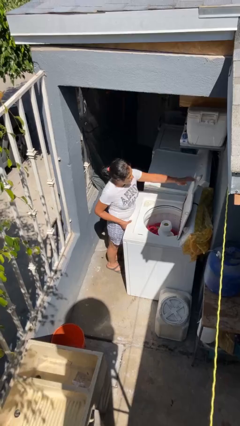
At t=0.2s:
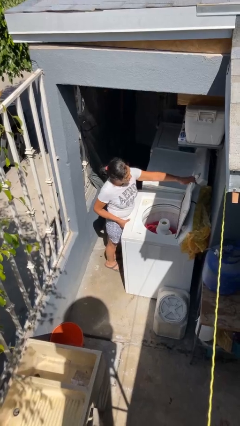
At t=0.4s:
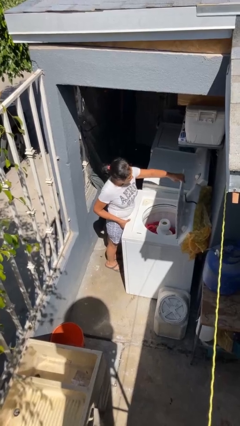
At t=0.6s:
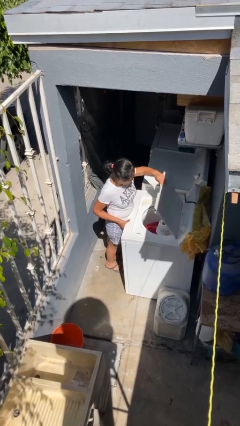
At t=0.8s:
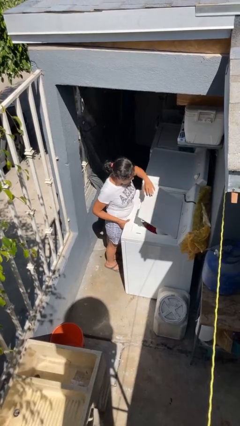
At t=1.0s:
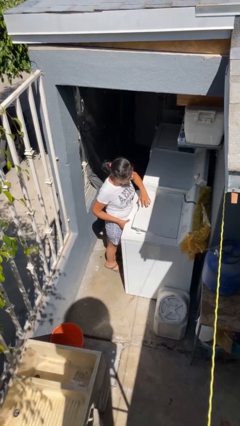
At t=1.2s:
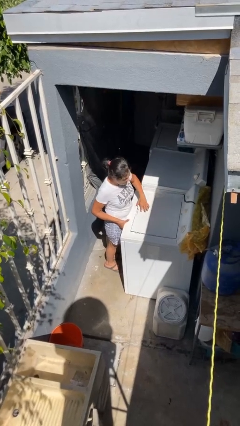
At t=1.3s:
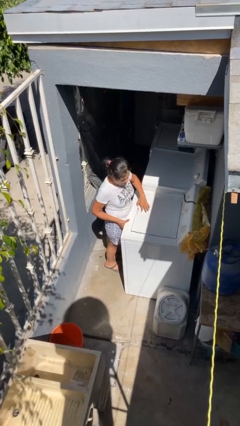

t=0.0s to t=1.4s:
person closes clothes washer

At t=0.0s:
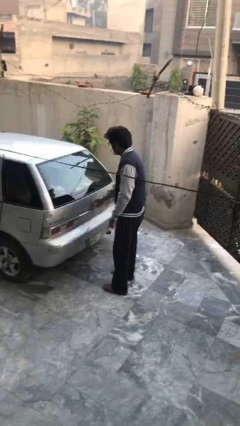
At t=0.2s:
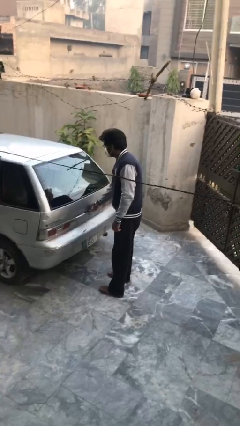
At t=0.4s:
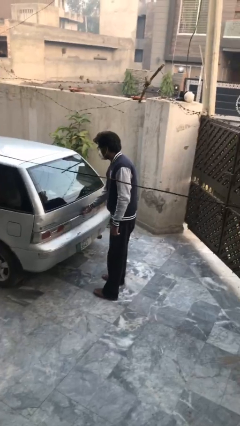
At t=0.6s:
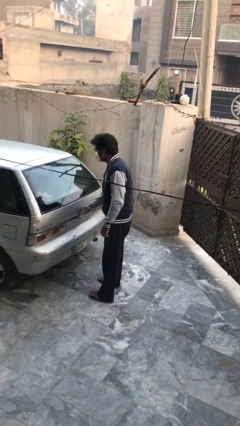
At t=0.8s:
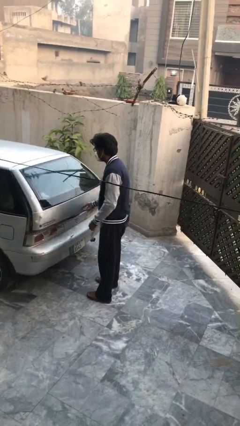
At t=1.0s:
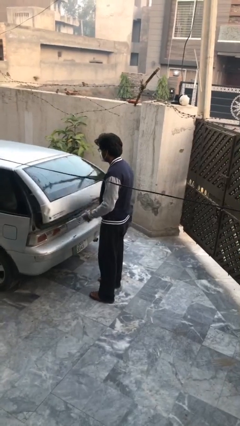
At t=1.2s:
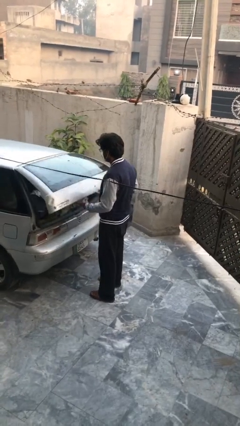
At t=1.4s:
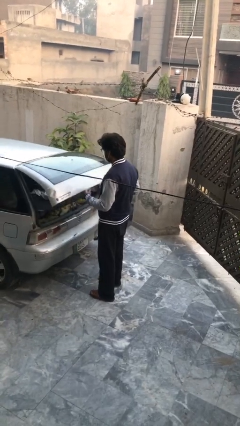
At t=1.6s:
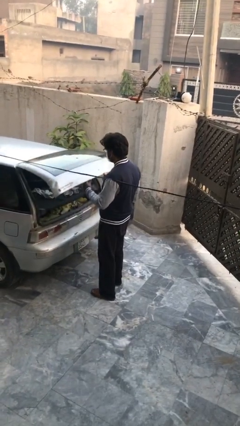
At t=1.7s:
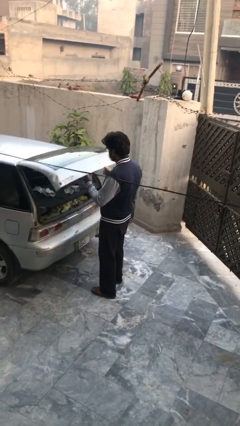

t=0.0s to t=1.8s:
person opens car trunk

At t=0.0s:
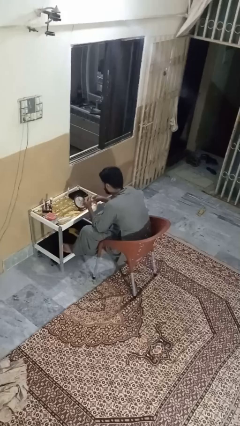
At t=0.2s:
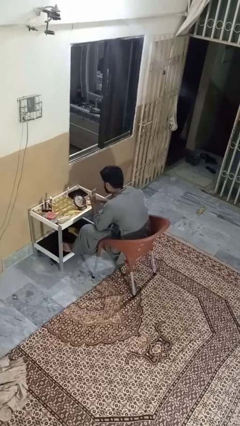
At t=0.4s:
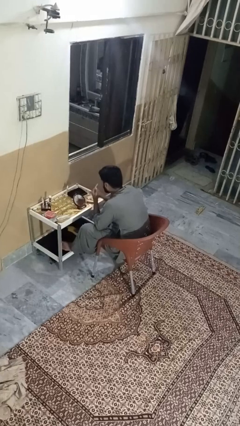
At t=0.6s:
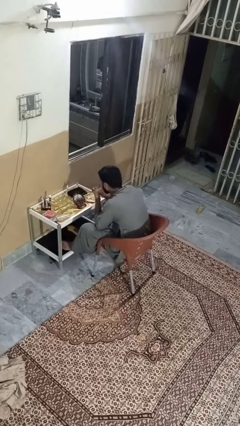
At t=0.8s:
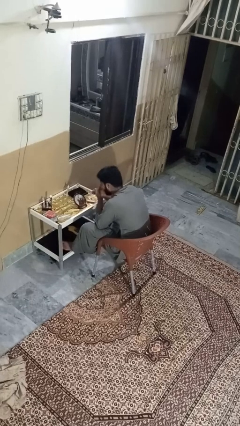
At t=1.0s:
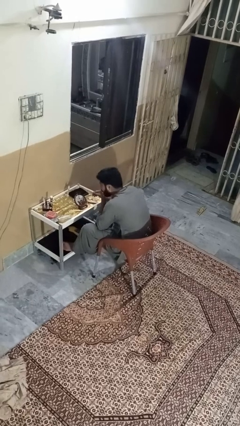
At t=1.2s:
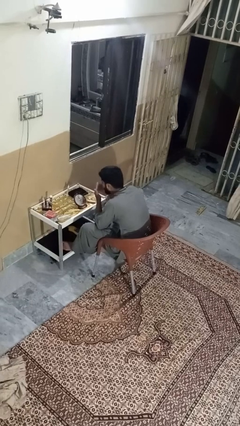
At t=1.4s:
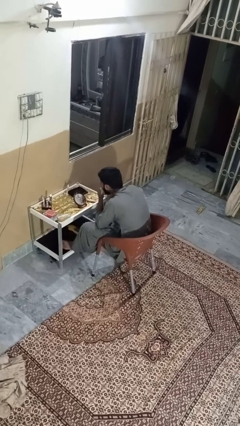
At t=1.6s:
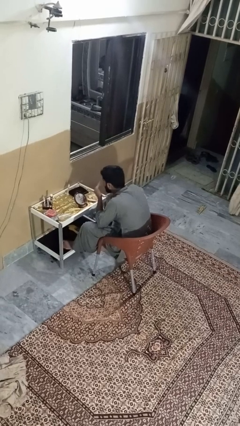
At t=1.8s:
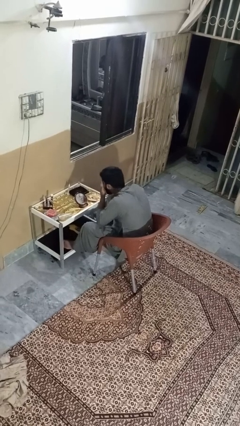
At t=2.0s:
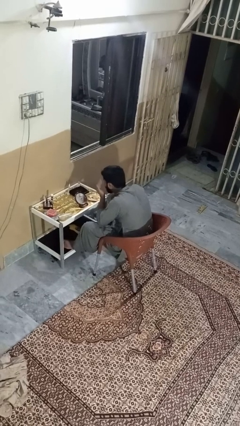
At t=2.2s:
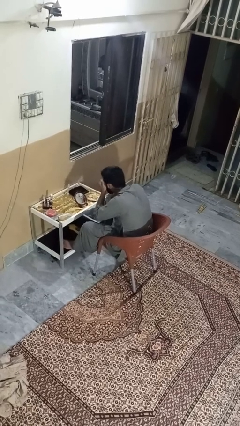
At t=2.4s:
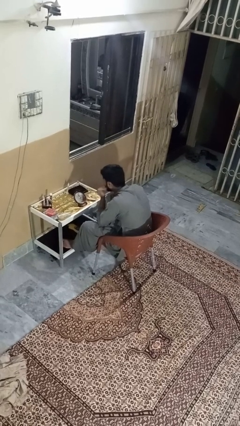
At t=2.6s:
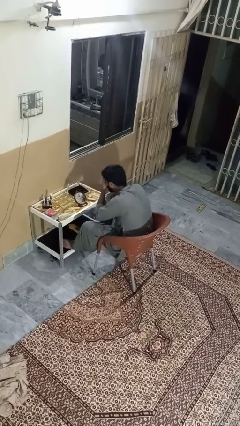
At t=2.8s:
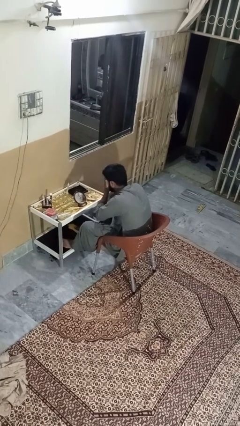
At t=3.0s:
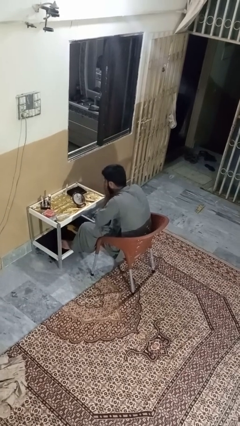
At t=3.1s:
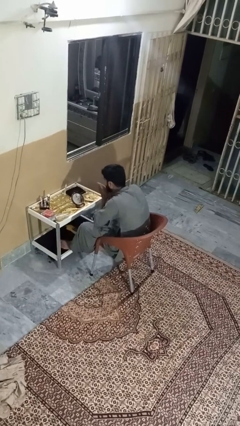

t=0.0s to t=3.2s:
person applies foundation makeup

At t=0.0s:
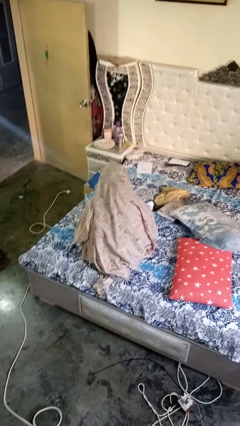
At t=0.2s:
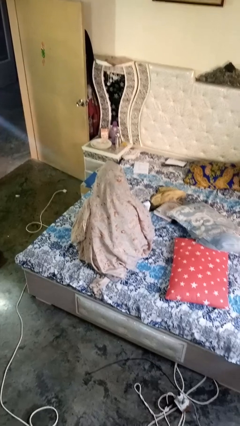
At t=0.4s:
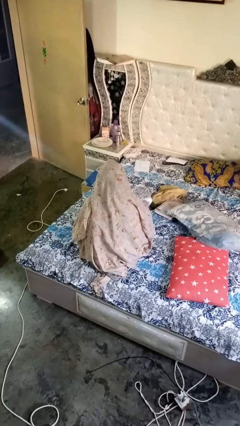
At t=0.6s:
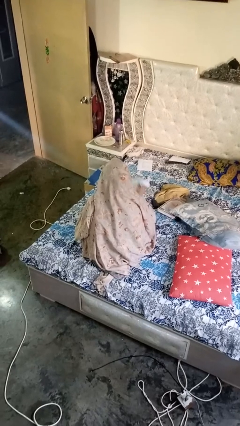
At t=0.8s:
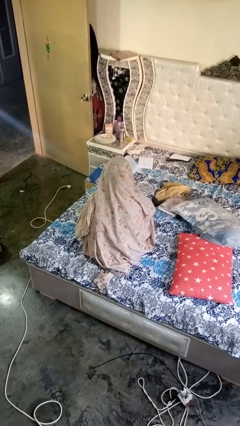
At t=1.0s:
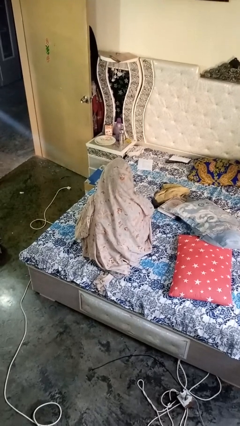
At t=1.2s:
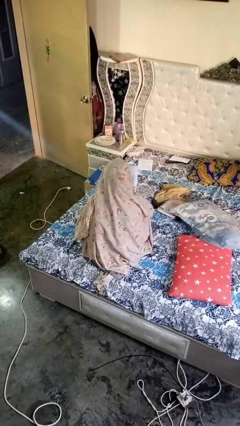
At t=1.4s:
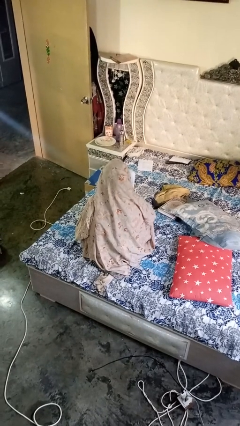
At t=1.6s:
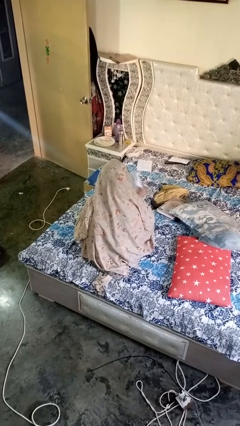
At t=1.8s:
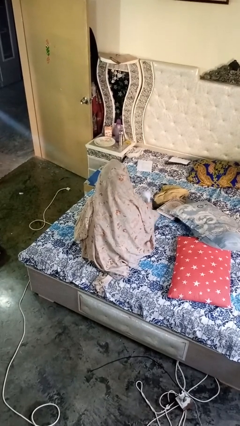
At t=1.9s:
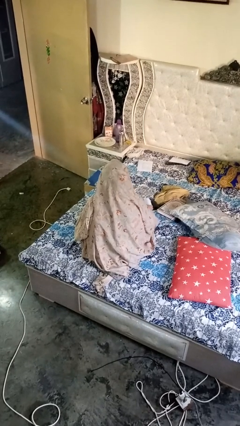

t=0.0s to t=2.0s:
person wipes mouth with napkin

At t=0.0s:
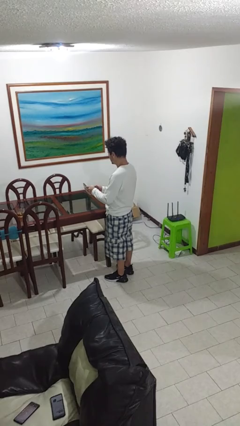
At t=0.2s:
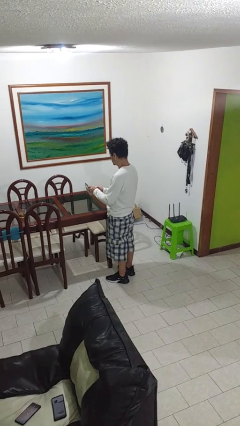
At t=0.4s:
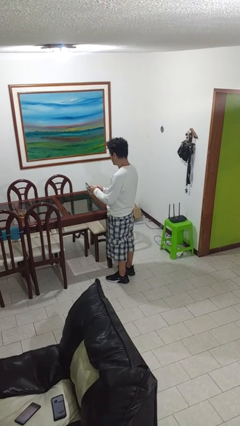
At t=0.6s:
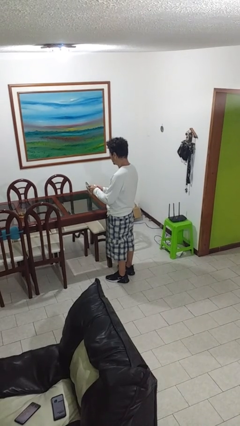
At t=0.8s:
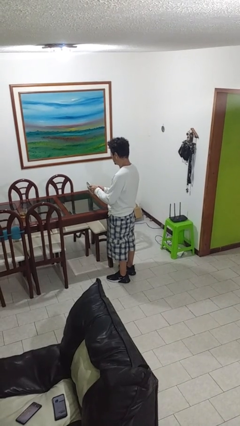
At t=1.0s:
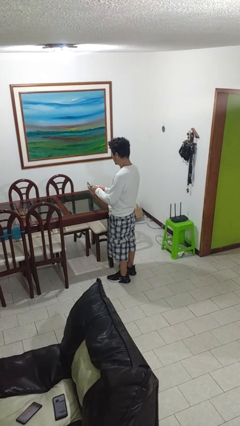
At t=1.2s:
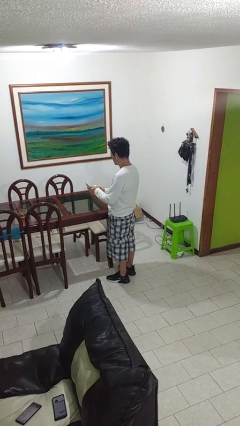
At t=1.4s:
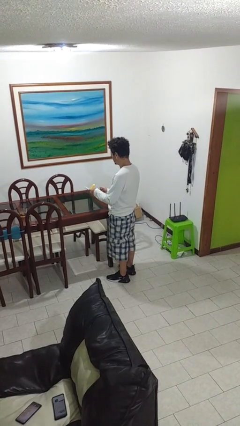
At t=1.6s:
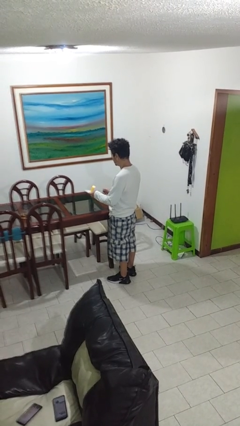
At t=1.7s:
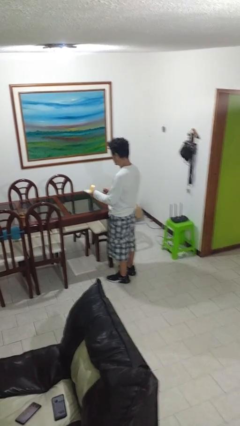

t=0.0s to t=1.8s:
person lights candle

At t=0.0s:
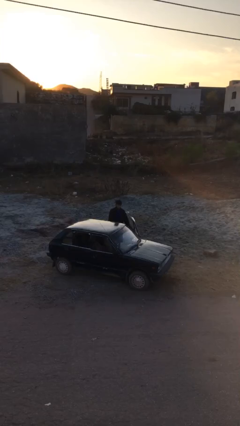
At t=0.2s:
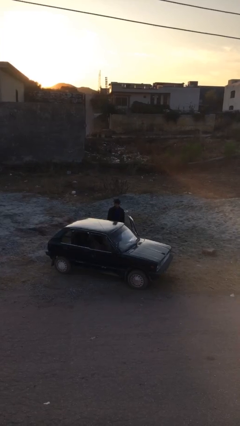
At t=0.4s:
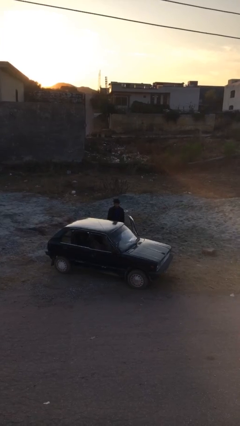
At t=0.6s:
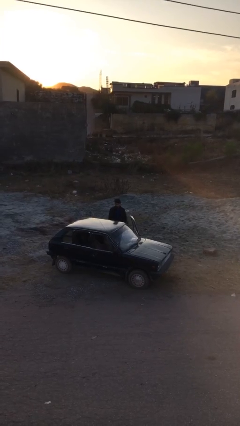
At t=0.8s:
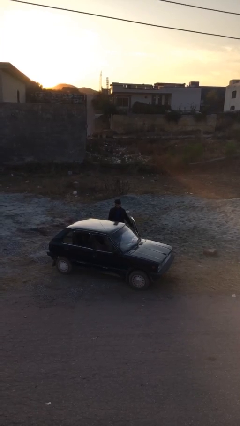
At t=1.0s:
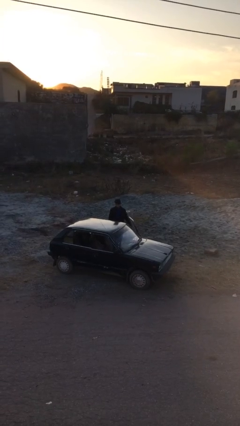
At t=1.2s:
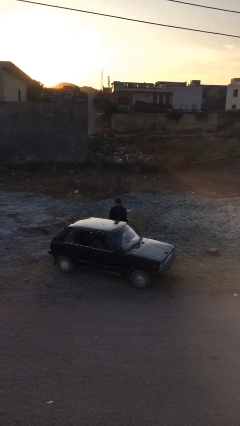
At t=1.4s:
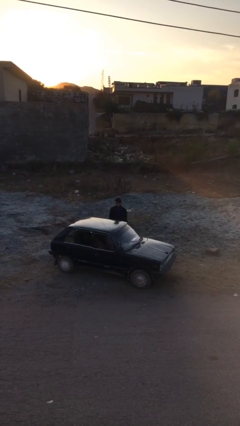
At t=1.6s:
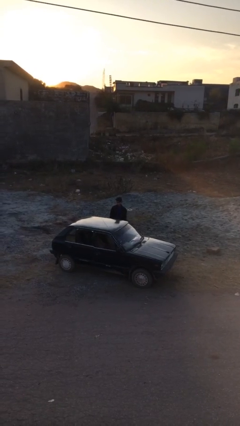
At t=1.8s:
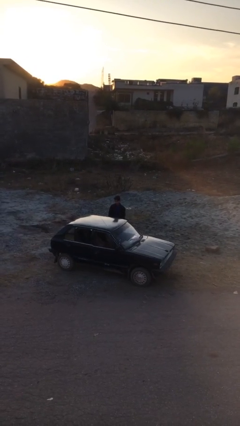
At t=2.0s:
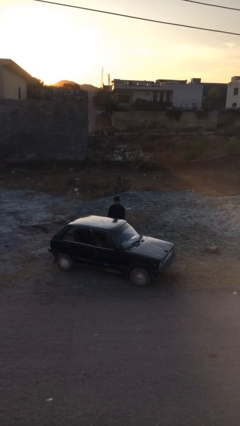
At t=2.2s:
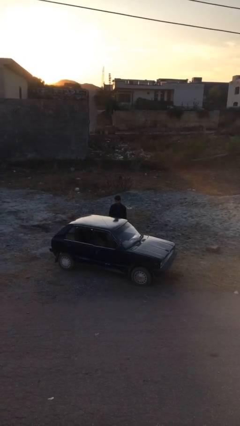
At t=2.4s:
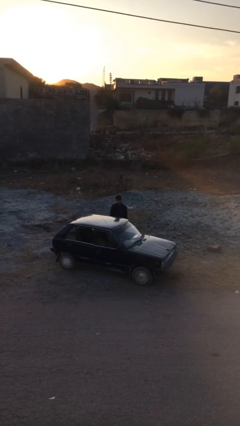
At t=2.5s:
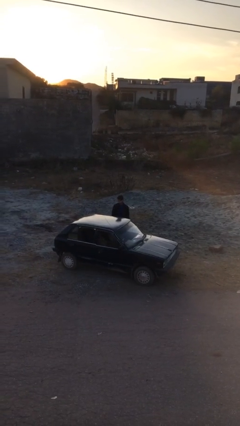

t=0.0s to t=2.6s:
person closes car door

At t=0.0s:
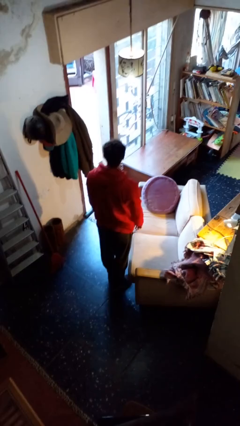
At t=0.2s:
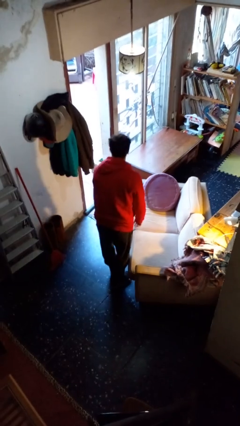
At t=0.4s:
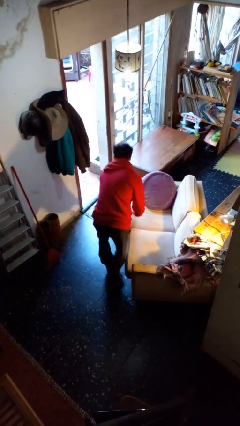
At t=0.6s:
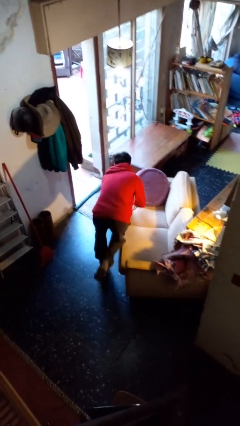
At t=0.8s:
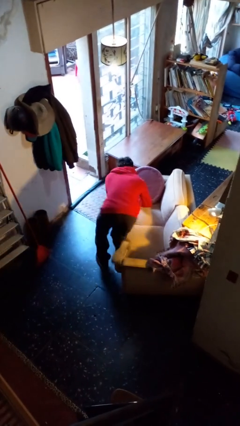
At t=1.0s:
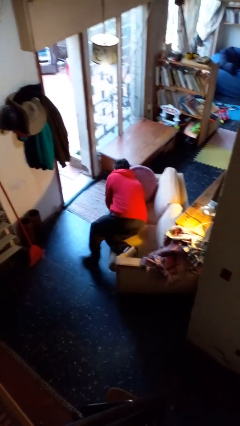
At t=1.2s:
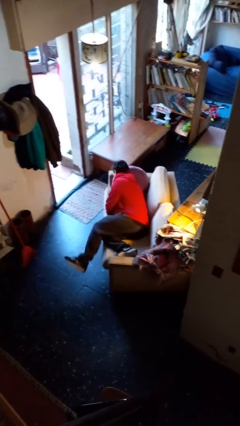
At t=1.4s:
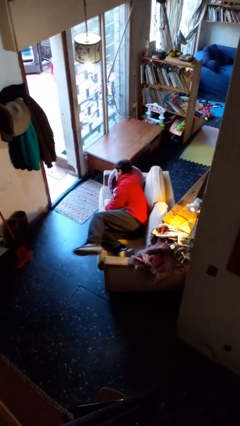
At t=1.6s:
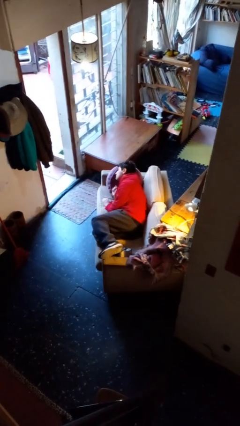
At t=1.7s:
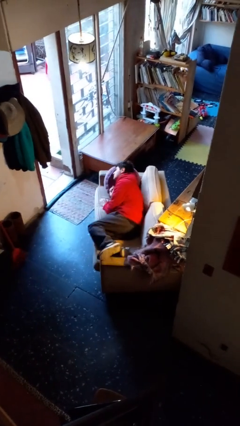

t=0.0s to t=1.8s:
person lies down on couch

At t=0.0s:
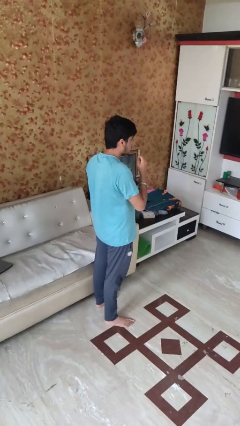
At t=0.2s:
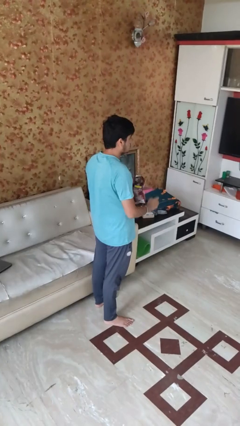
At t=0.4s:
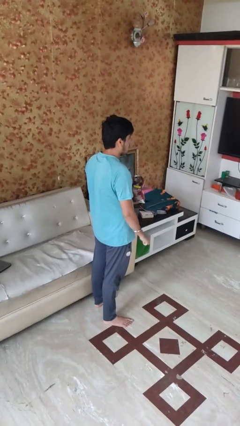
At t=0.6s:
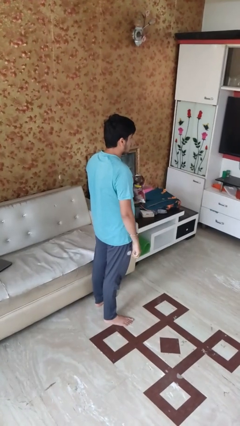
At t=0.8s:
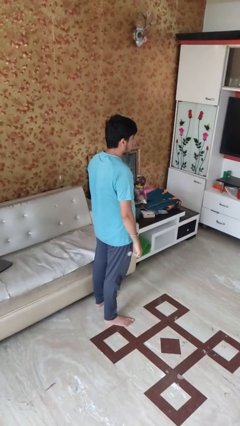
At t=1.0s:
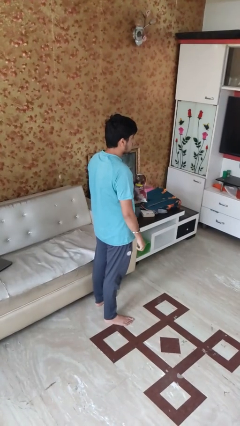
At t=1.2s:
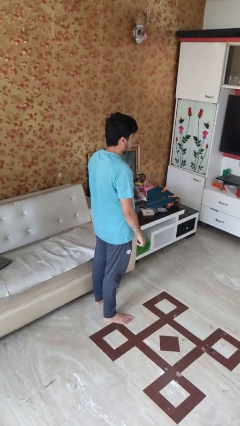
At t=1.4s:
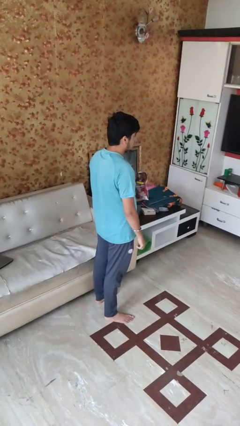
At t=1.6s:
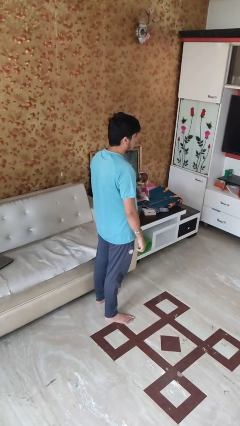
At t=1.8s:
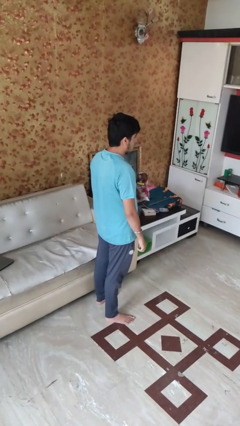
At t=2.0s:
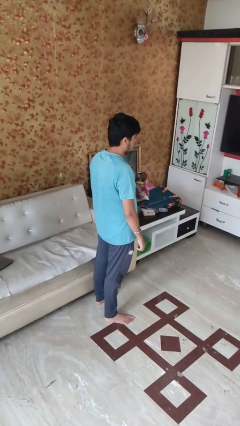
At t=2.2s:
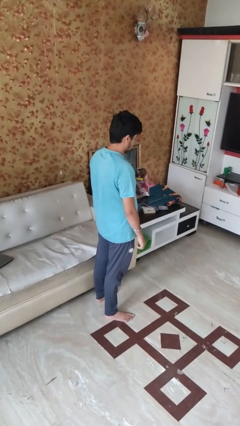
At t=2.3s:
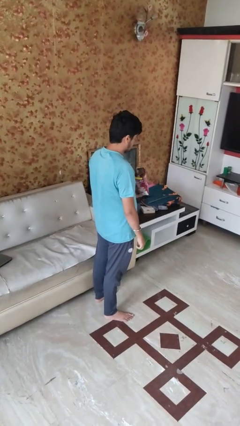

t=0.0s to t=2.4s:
person eats snack from bag
